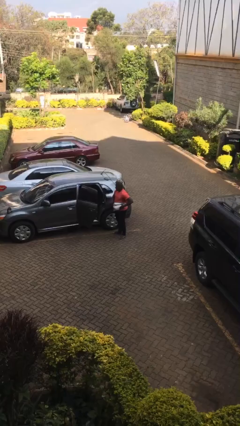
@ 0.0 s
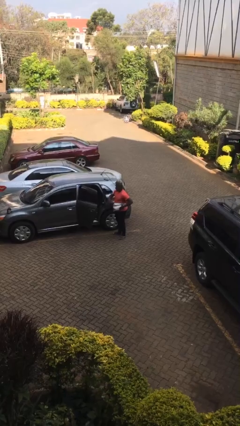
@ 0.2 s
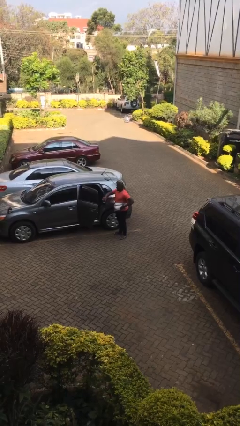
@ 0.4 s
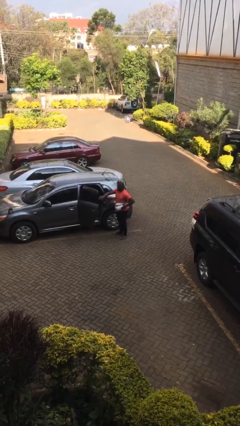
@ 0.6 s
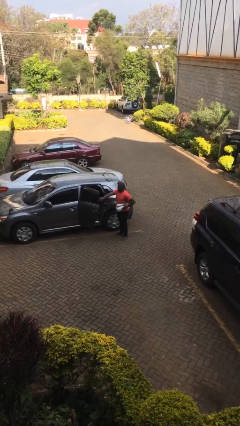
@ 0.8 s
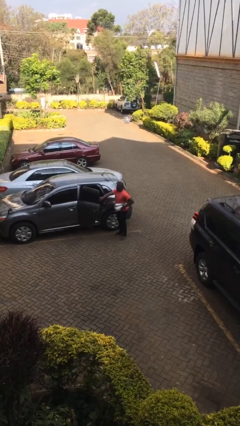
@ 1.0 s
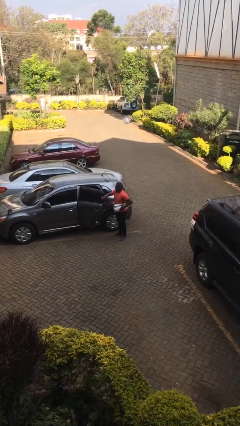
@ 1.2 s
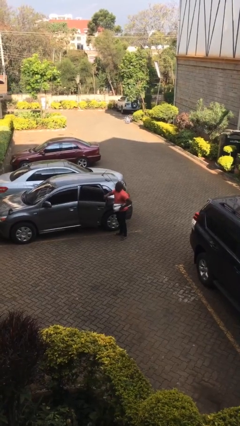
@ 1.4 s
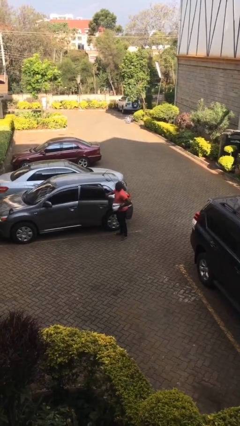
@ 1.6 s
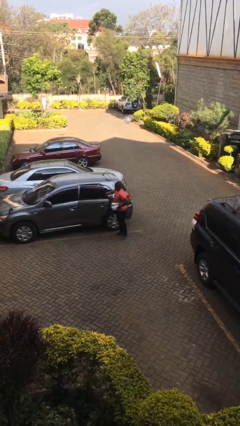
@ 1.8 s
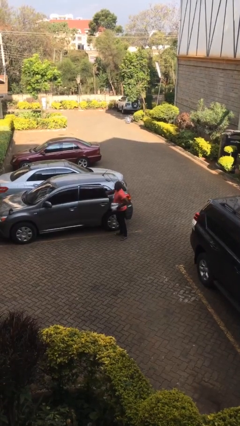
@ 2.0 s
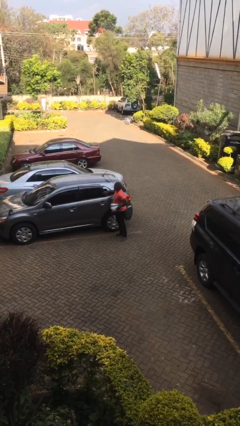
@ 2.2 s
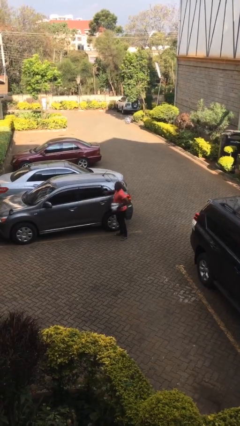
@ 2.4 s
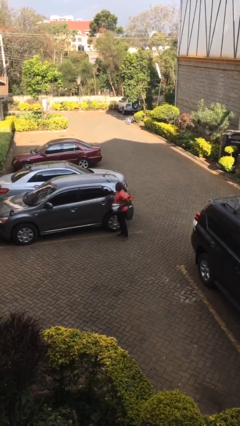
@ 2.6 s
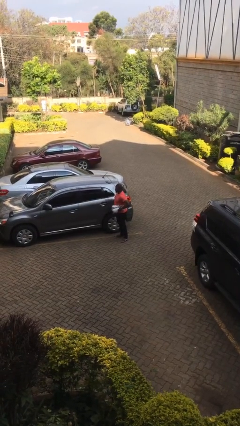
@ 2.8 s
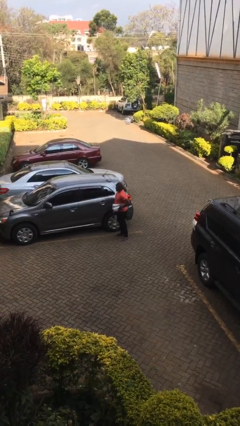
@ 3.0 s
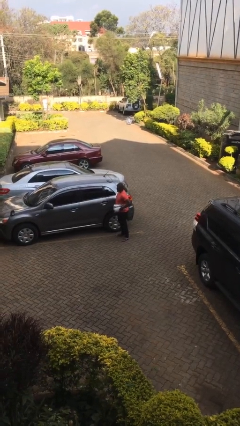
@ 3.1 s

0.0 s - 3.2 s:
person closes car door

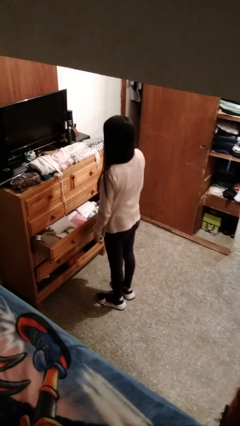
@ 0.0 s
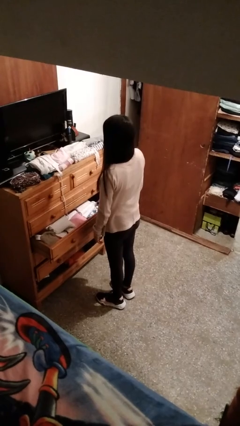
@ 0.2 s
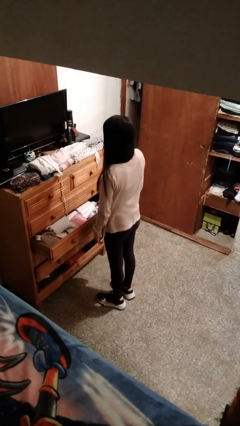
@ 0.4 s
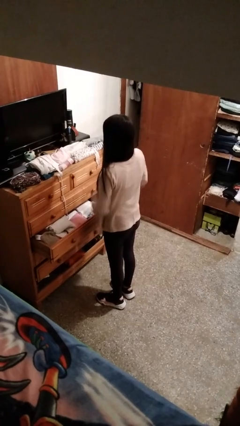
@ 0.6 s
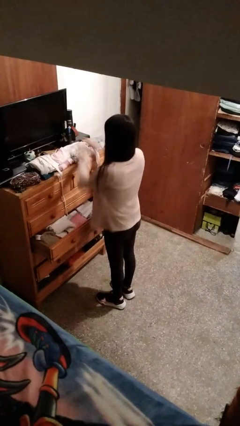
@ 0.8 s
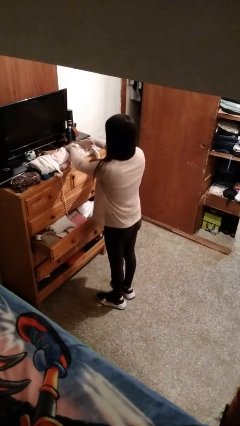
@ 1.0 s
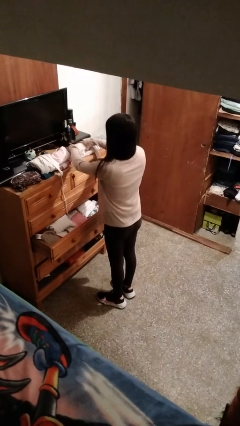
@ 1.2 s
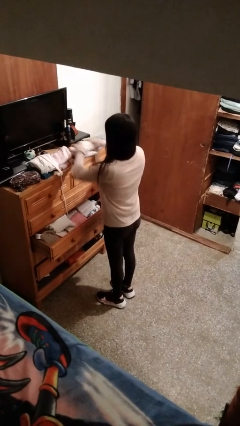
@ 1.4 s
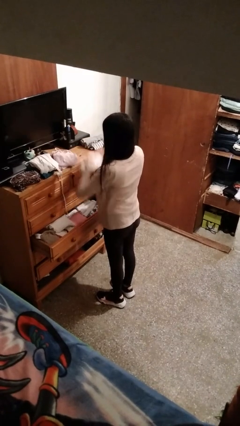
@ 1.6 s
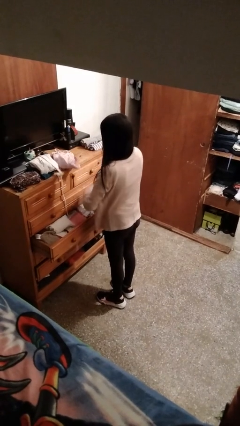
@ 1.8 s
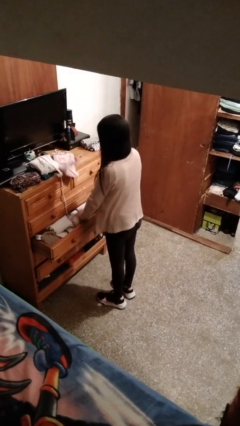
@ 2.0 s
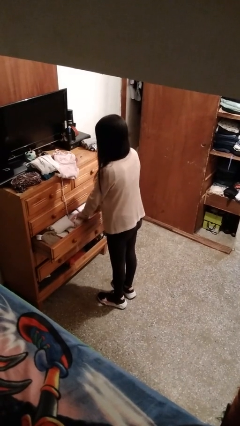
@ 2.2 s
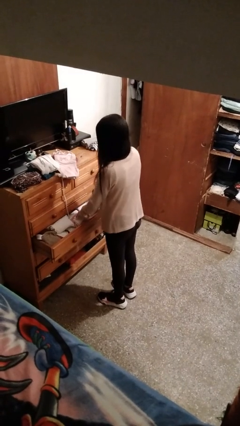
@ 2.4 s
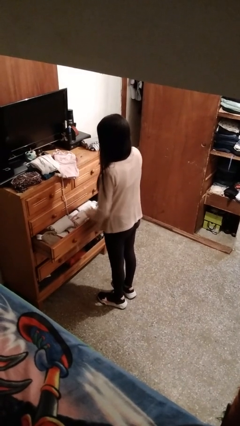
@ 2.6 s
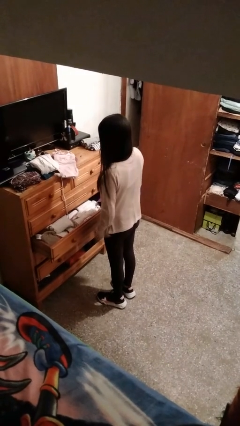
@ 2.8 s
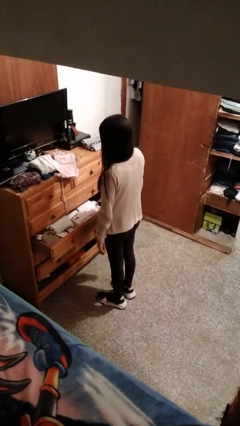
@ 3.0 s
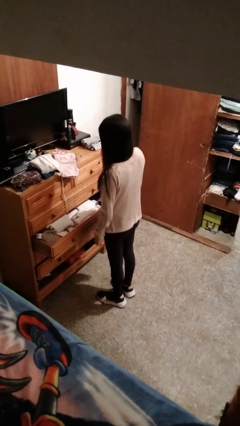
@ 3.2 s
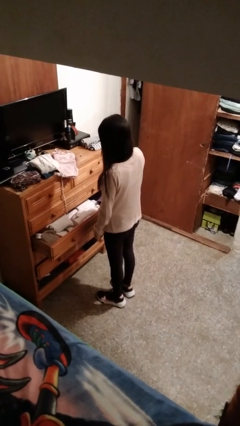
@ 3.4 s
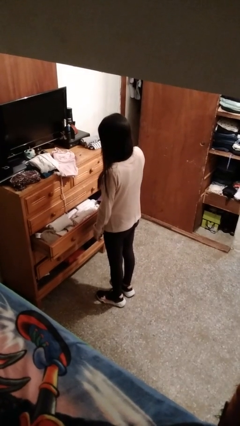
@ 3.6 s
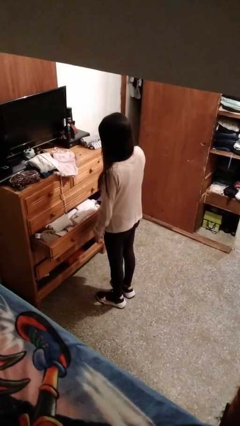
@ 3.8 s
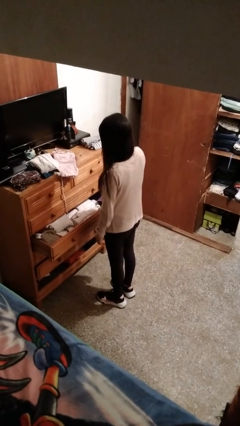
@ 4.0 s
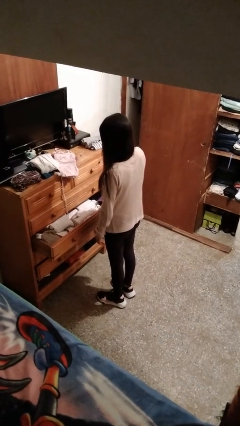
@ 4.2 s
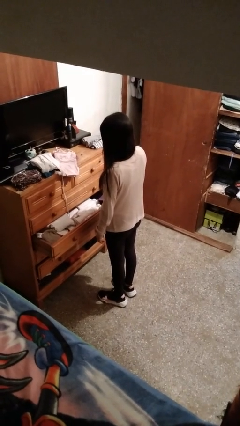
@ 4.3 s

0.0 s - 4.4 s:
person puts clothes into dresser

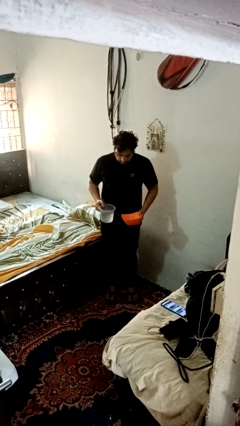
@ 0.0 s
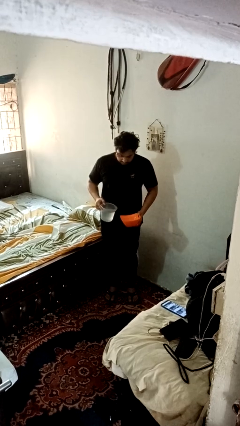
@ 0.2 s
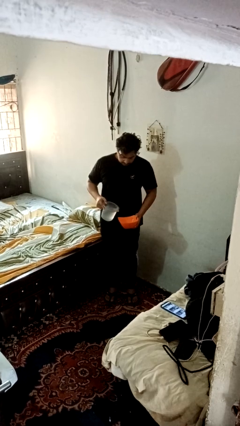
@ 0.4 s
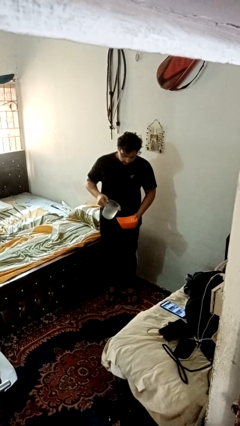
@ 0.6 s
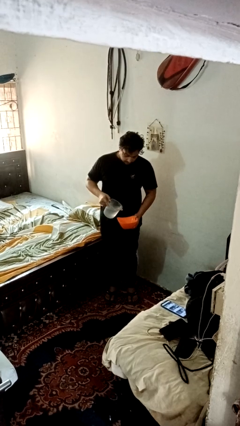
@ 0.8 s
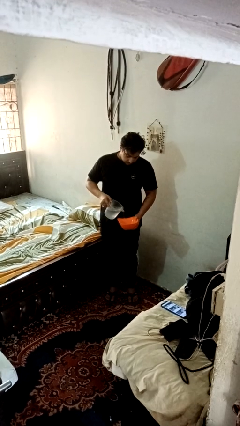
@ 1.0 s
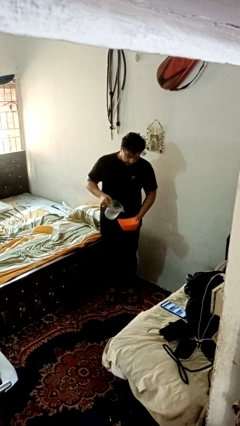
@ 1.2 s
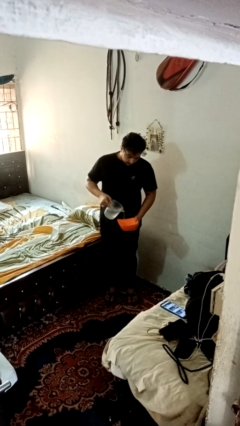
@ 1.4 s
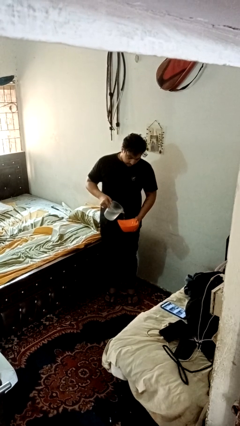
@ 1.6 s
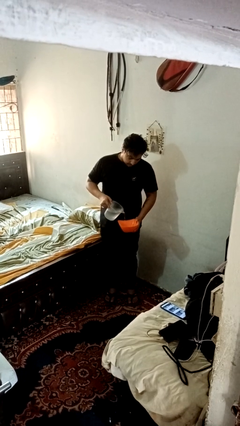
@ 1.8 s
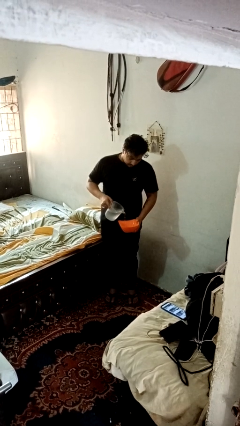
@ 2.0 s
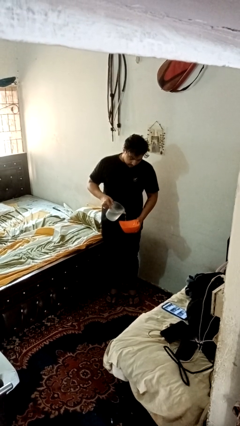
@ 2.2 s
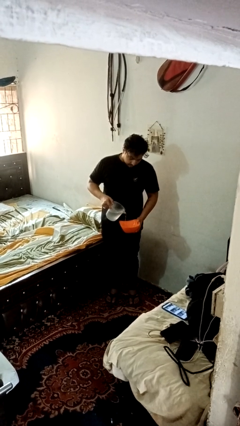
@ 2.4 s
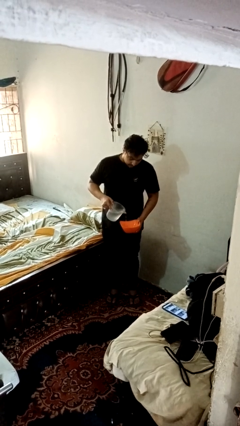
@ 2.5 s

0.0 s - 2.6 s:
person pours into bowl

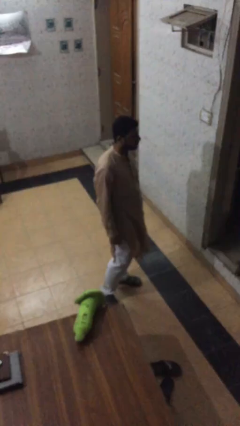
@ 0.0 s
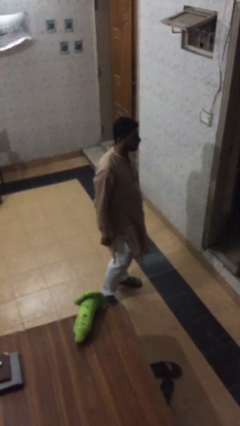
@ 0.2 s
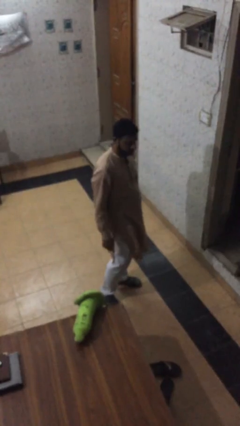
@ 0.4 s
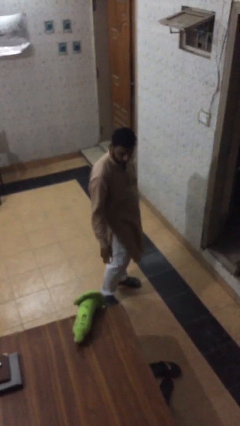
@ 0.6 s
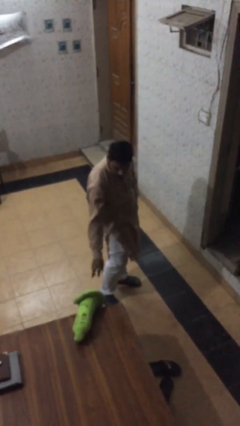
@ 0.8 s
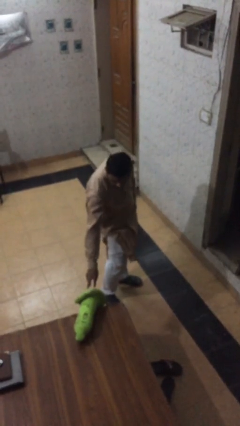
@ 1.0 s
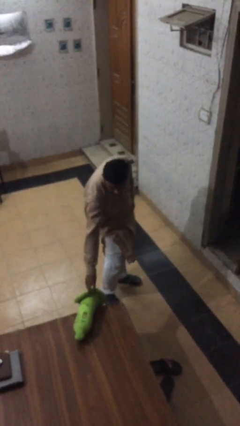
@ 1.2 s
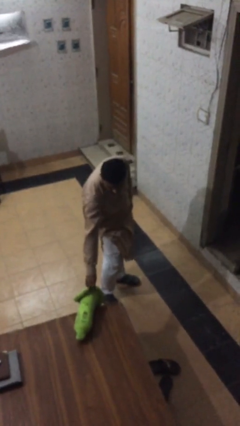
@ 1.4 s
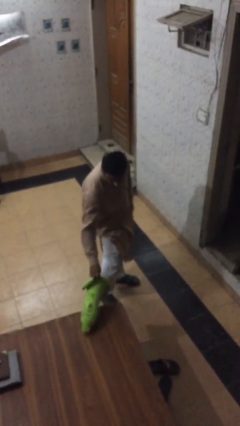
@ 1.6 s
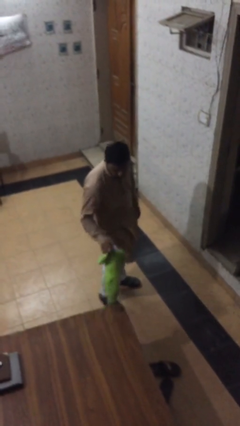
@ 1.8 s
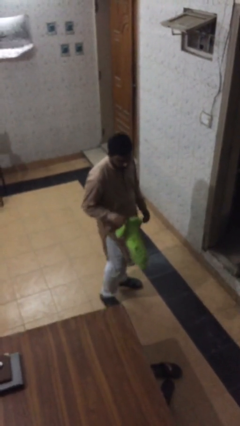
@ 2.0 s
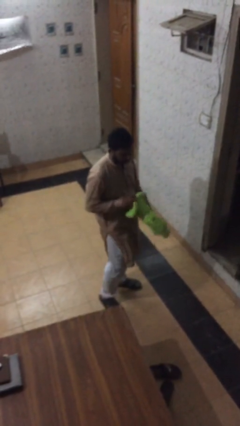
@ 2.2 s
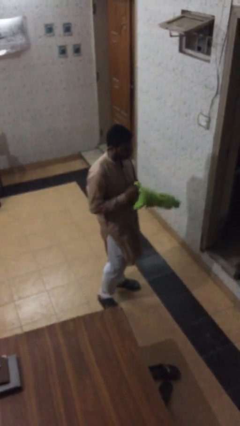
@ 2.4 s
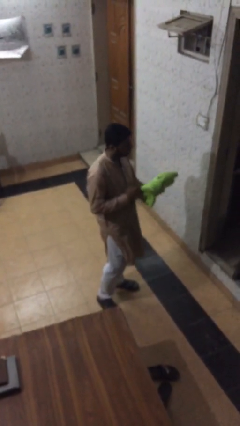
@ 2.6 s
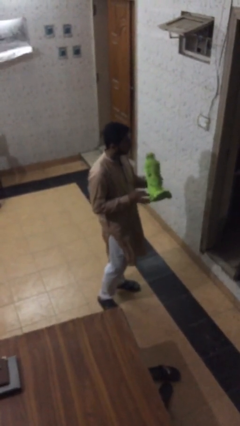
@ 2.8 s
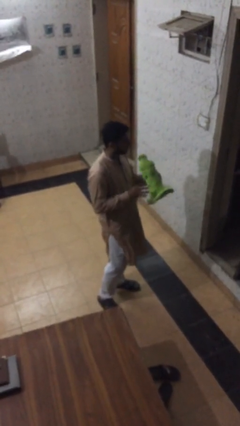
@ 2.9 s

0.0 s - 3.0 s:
person picks up object from table

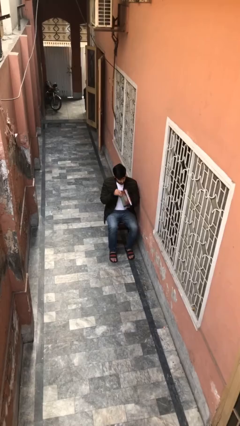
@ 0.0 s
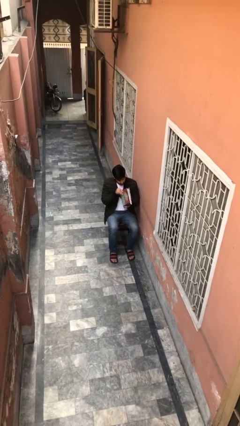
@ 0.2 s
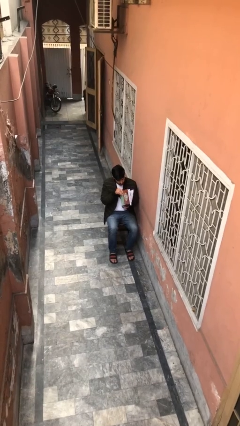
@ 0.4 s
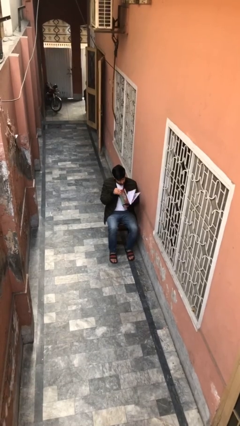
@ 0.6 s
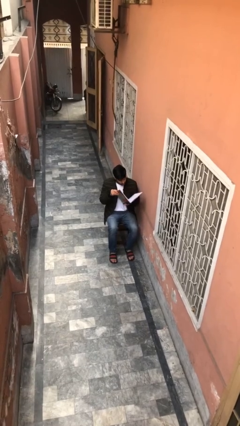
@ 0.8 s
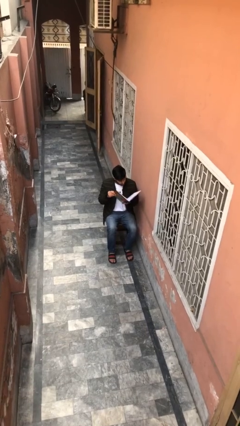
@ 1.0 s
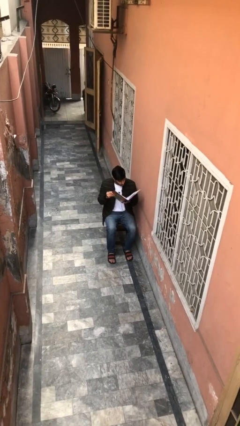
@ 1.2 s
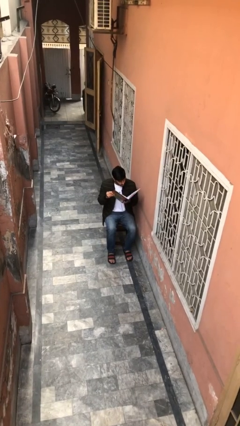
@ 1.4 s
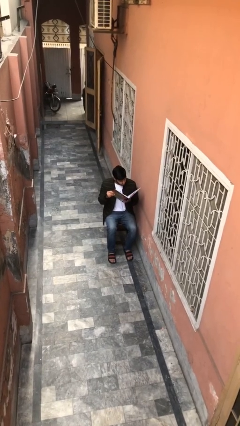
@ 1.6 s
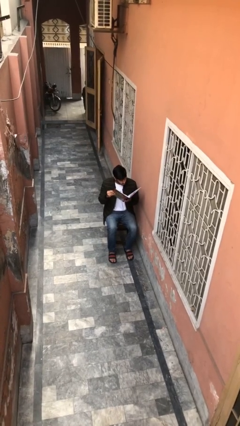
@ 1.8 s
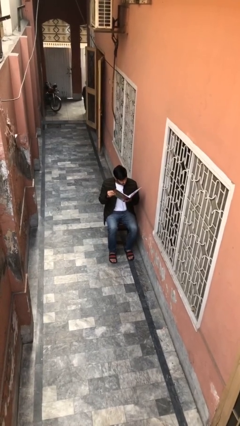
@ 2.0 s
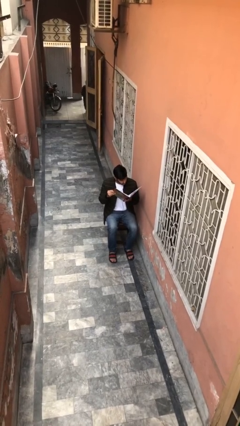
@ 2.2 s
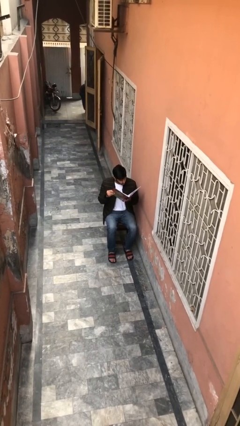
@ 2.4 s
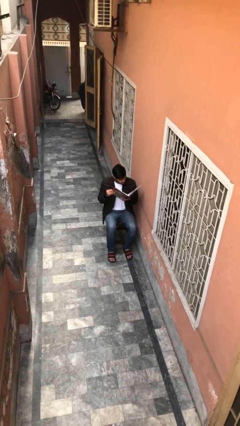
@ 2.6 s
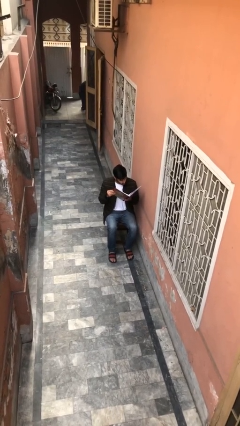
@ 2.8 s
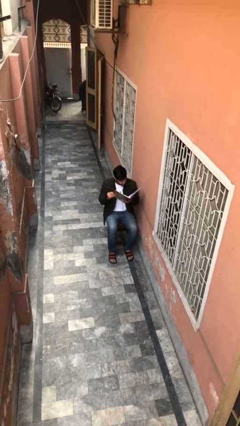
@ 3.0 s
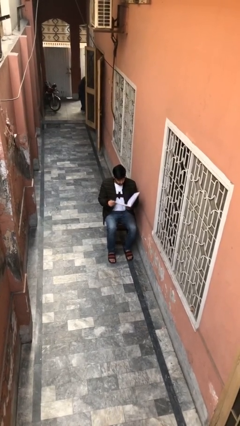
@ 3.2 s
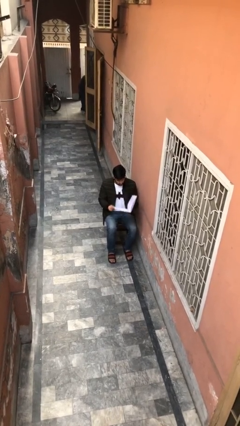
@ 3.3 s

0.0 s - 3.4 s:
person reads document

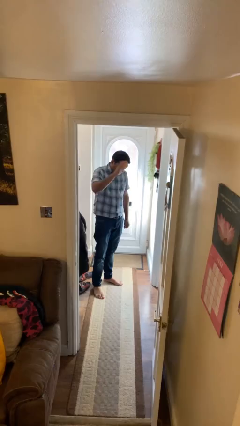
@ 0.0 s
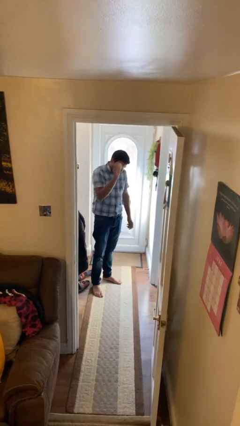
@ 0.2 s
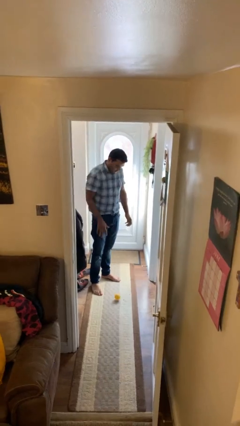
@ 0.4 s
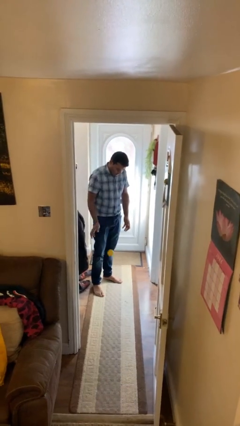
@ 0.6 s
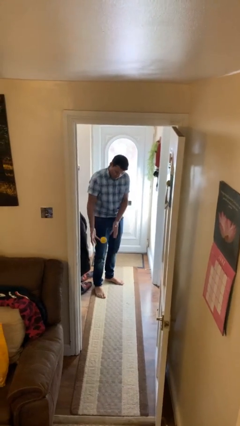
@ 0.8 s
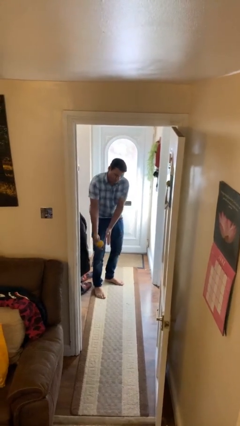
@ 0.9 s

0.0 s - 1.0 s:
person bounces ball on floor
